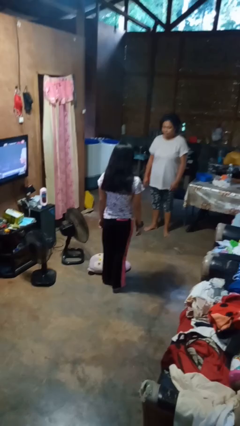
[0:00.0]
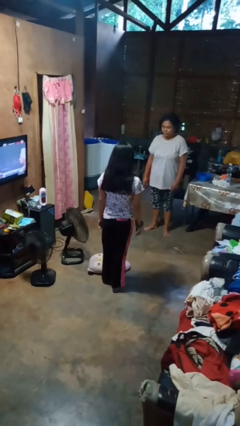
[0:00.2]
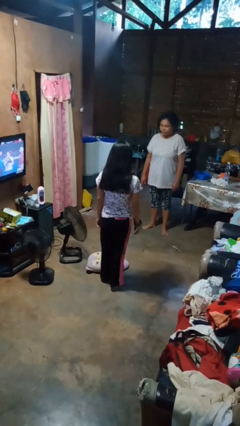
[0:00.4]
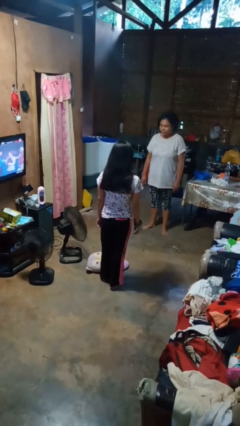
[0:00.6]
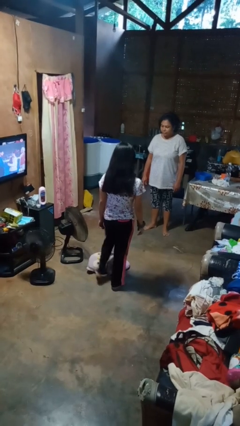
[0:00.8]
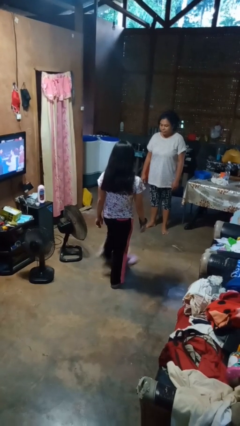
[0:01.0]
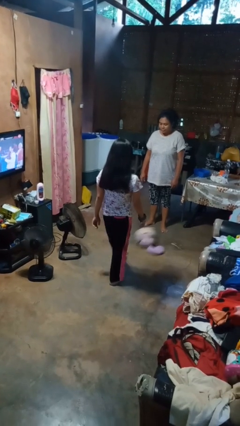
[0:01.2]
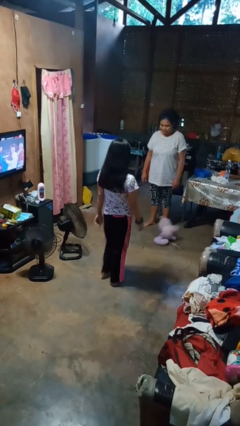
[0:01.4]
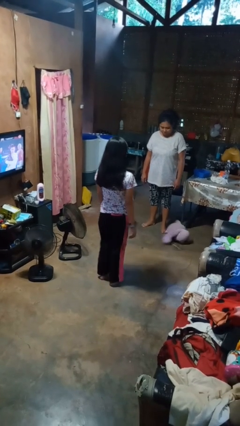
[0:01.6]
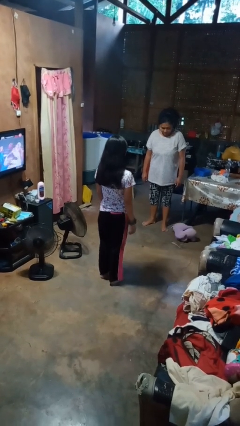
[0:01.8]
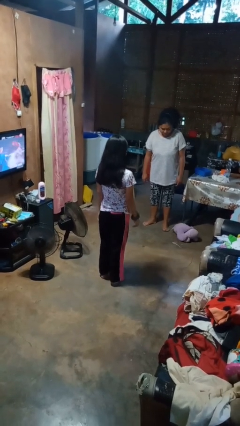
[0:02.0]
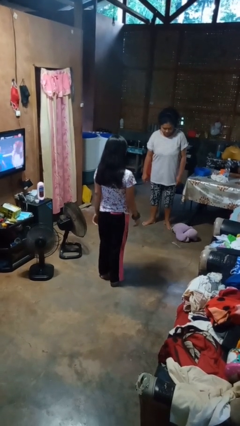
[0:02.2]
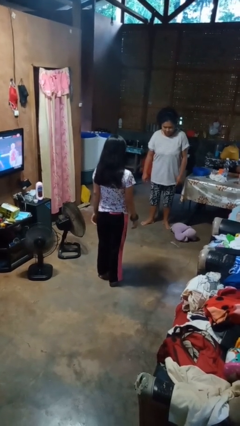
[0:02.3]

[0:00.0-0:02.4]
person kicks object to person

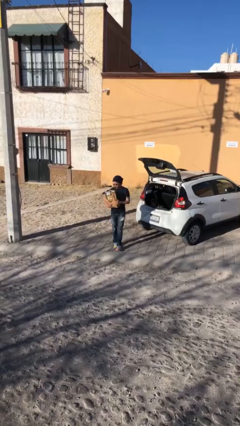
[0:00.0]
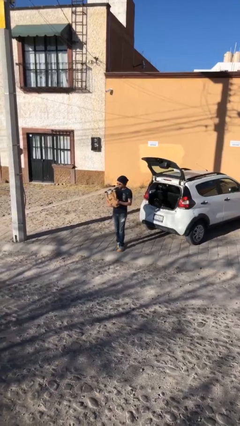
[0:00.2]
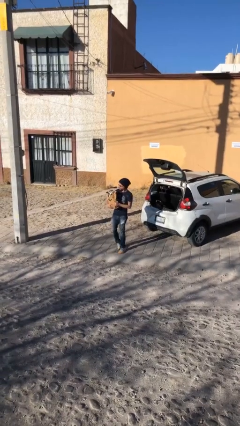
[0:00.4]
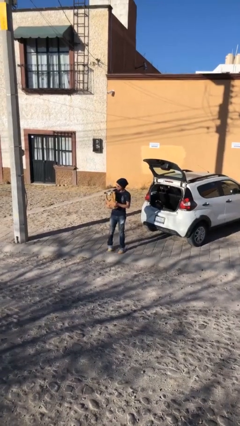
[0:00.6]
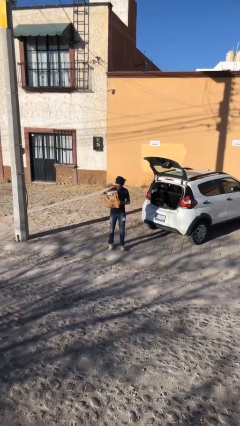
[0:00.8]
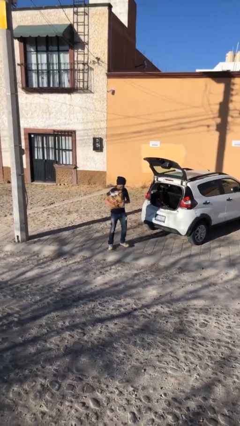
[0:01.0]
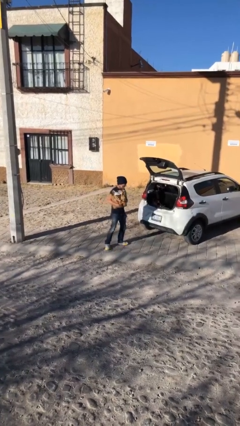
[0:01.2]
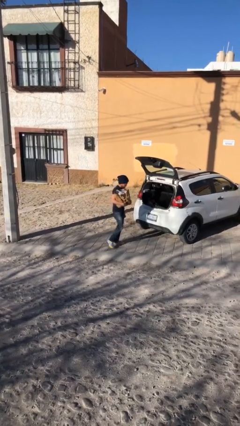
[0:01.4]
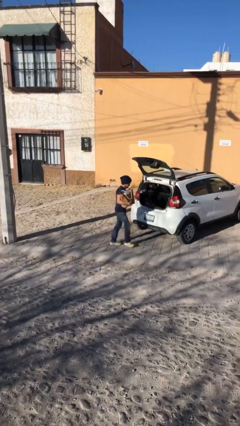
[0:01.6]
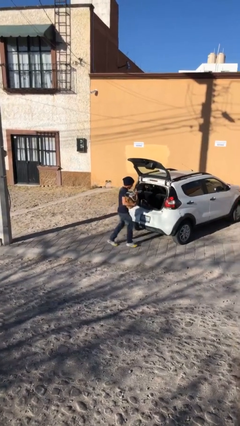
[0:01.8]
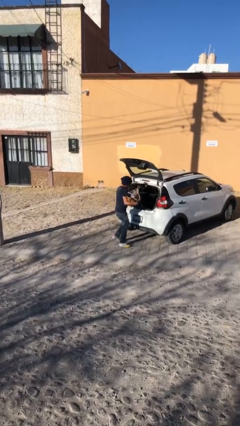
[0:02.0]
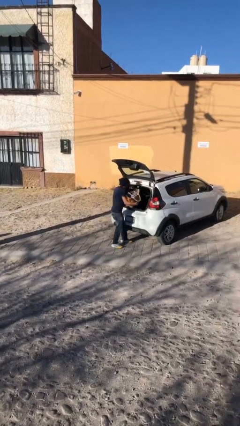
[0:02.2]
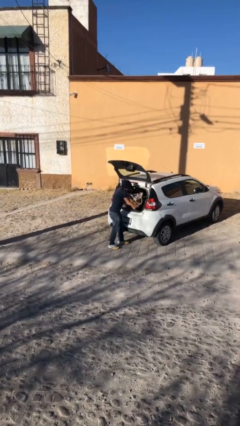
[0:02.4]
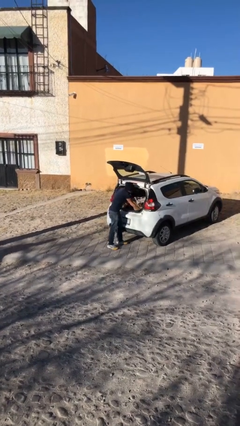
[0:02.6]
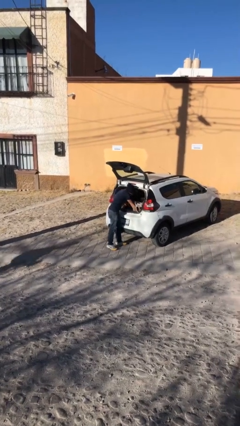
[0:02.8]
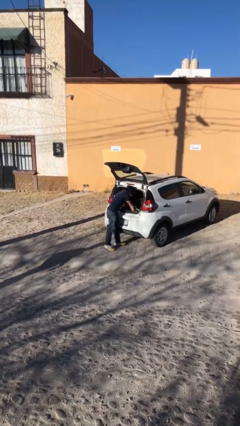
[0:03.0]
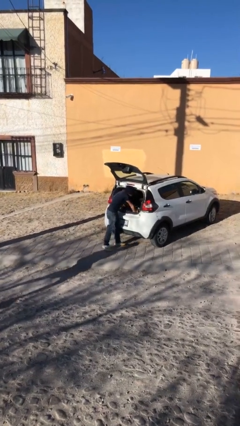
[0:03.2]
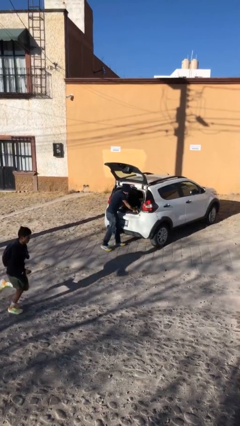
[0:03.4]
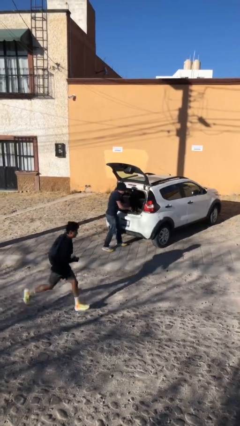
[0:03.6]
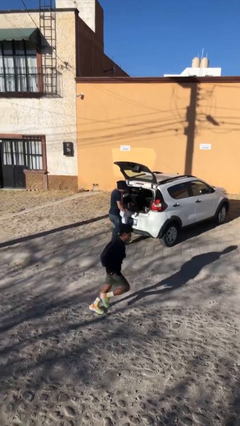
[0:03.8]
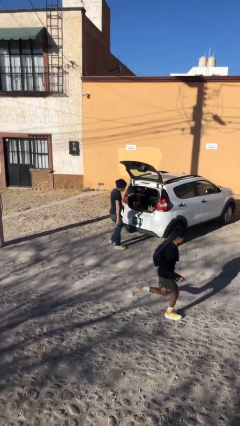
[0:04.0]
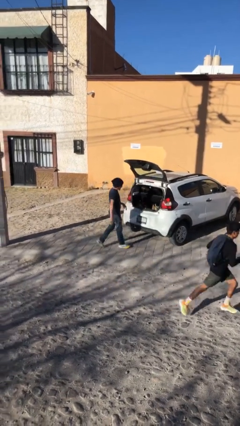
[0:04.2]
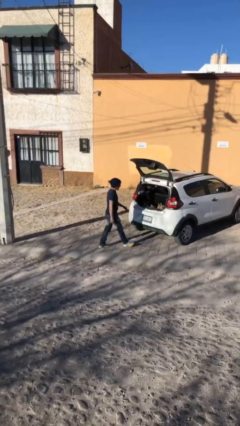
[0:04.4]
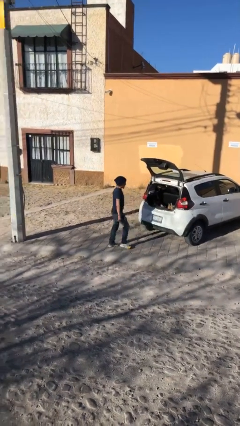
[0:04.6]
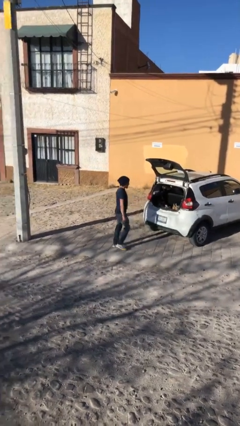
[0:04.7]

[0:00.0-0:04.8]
person loads car

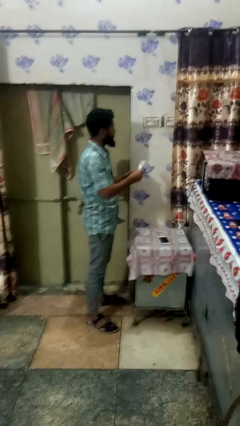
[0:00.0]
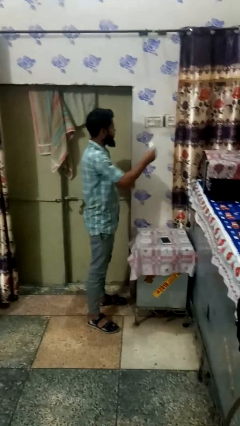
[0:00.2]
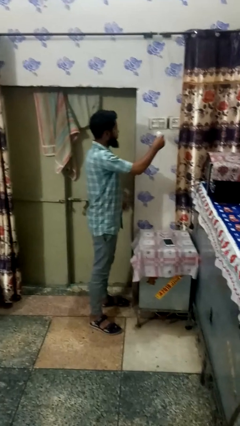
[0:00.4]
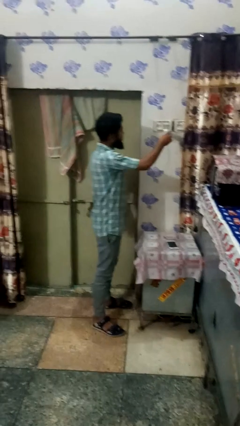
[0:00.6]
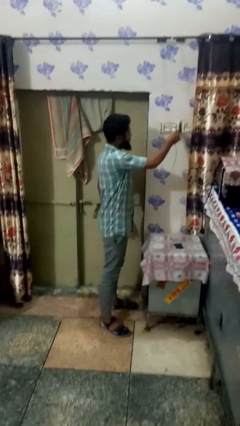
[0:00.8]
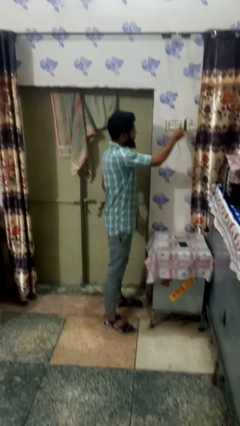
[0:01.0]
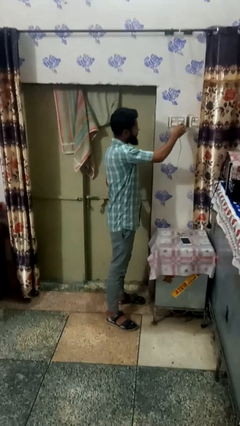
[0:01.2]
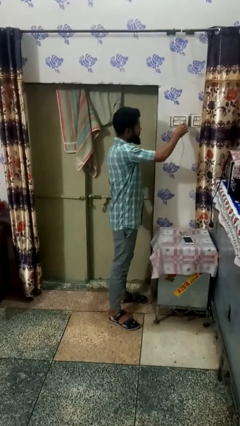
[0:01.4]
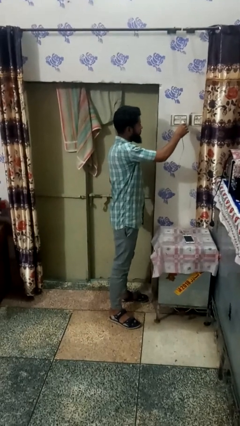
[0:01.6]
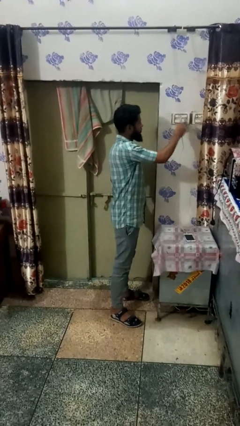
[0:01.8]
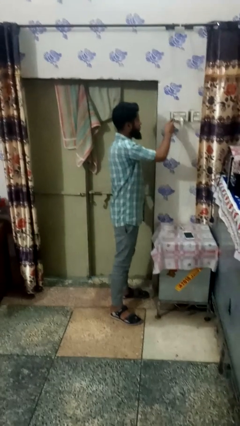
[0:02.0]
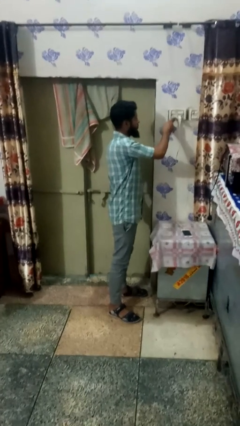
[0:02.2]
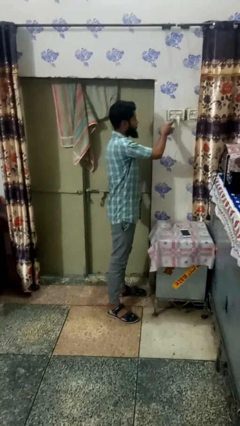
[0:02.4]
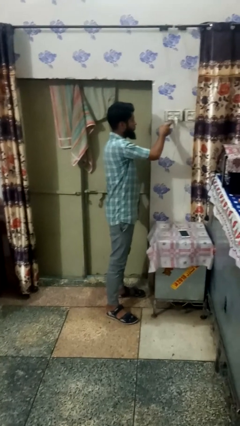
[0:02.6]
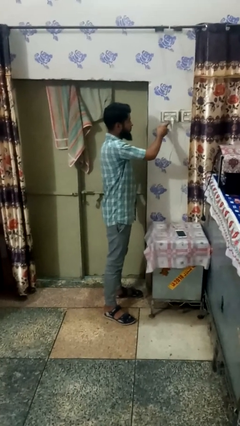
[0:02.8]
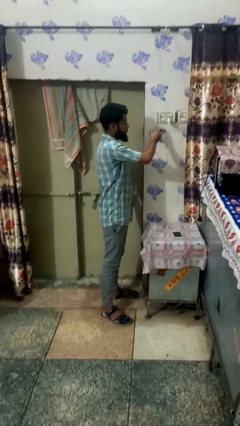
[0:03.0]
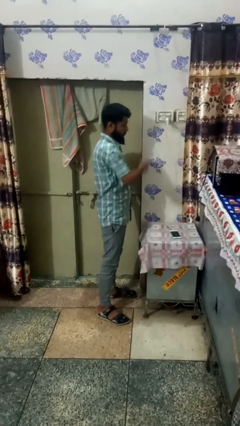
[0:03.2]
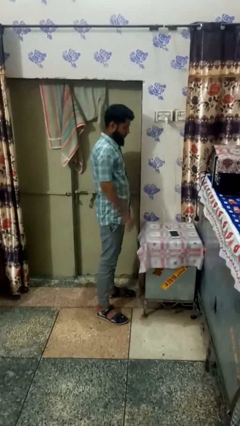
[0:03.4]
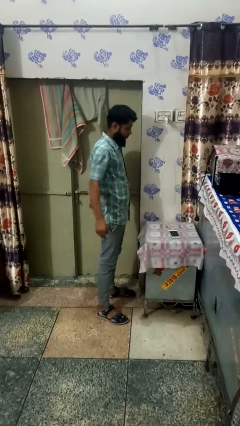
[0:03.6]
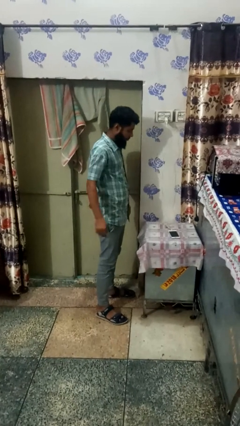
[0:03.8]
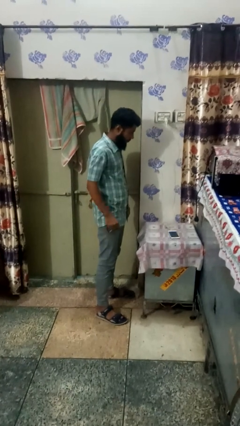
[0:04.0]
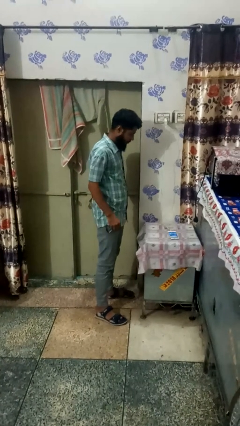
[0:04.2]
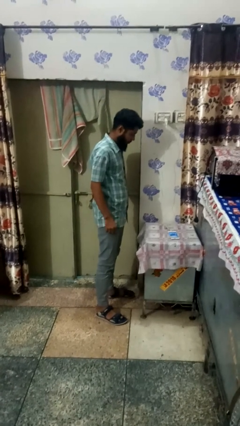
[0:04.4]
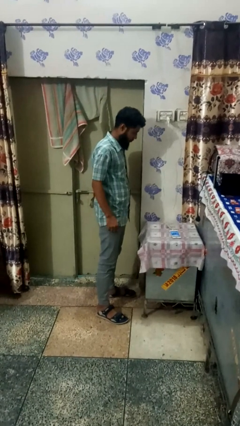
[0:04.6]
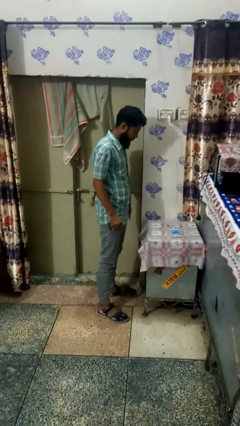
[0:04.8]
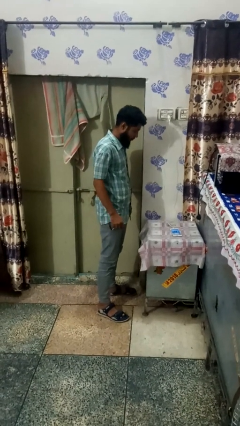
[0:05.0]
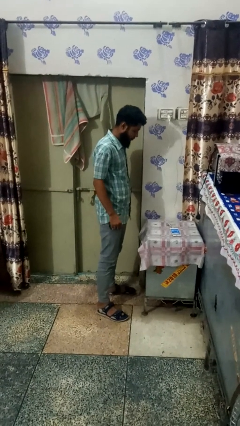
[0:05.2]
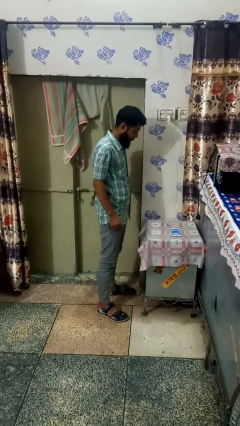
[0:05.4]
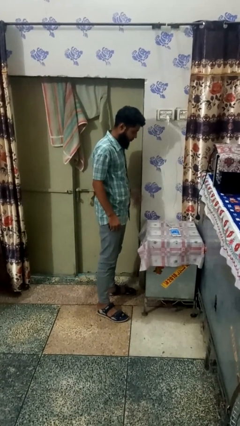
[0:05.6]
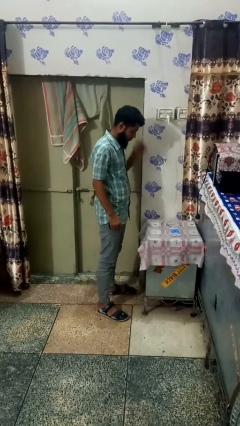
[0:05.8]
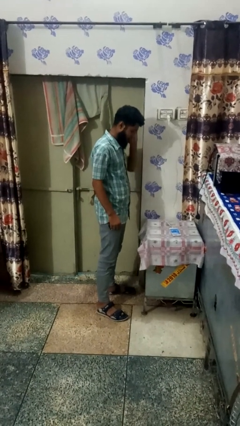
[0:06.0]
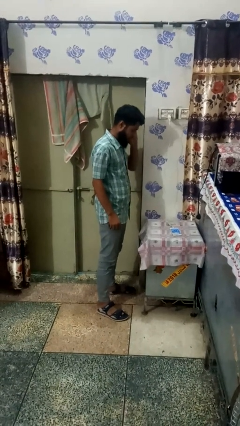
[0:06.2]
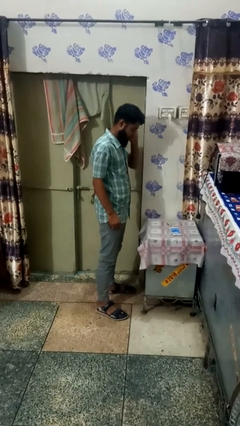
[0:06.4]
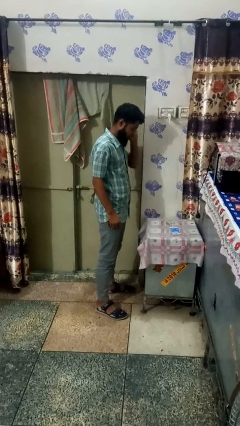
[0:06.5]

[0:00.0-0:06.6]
person plugs into electrical socket

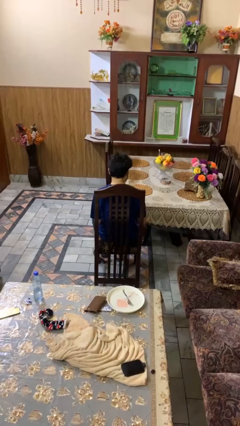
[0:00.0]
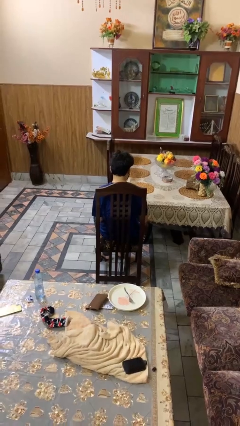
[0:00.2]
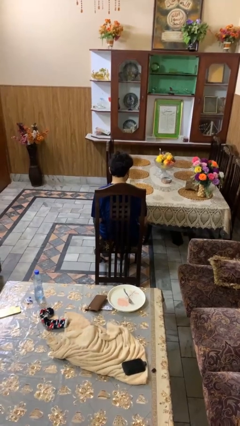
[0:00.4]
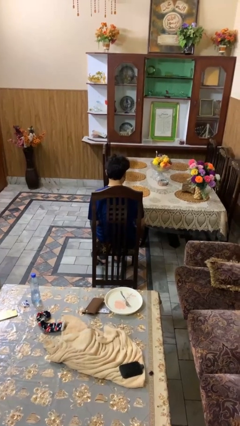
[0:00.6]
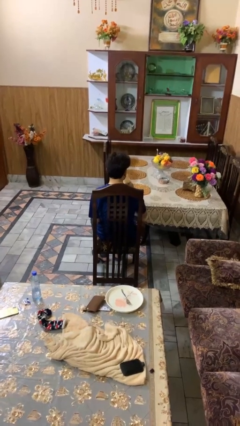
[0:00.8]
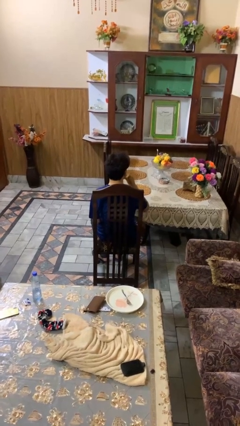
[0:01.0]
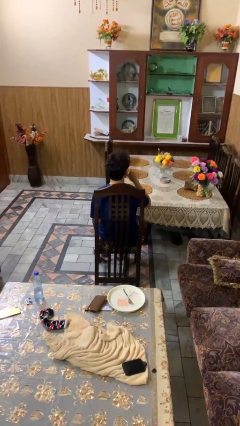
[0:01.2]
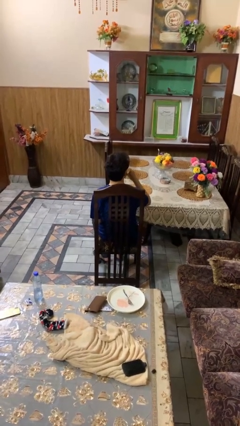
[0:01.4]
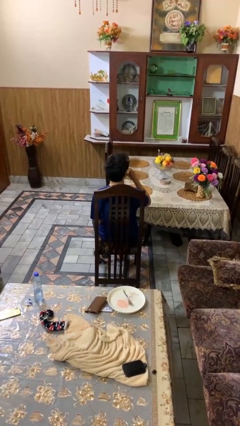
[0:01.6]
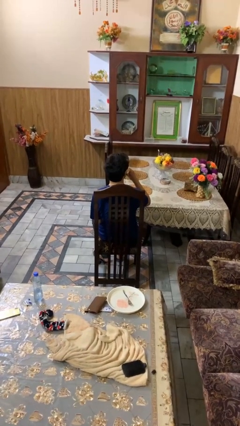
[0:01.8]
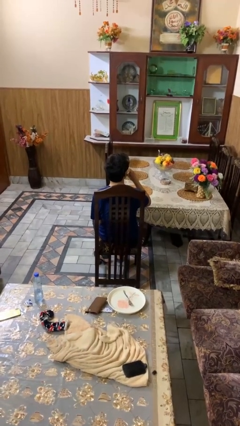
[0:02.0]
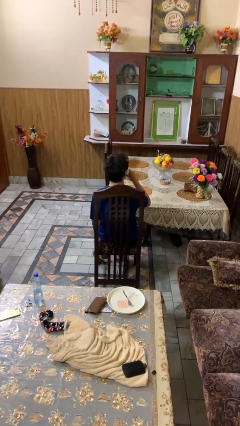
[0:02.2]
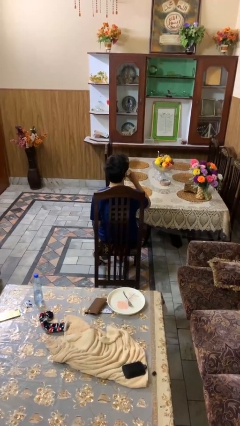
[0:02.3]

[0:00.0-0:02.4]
person drinks from shotglass

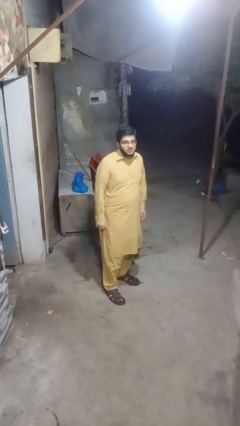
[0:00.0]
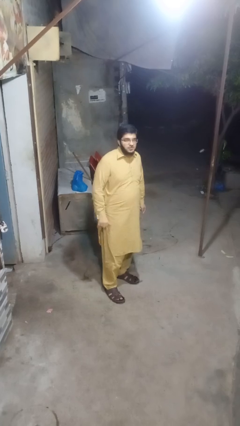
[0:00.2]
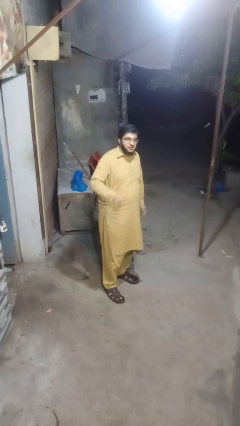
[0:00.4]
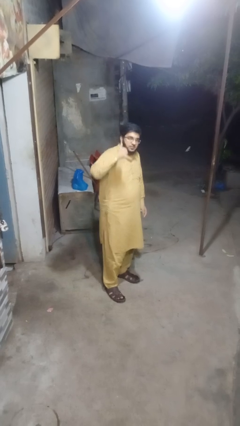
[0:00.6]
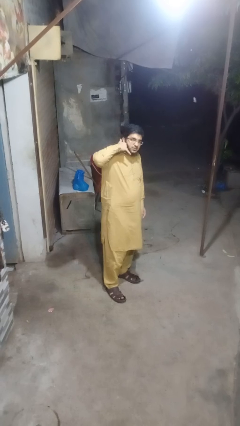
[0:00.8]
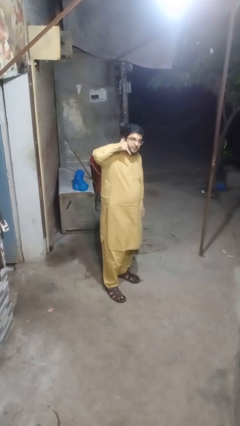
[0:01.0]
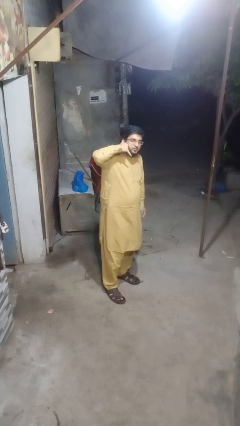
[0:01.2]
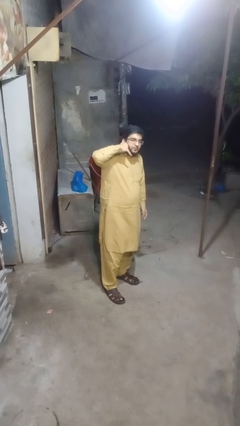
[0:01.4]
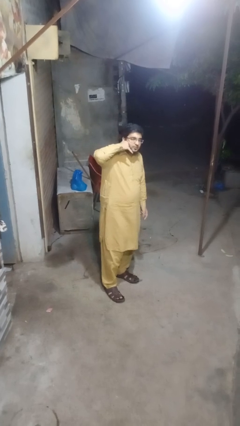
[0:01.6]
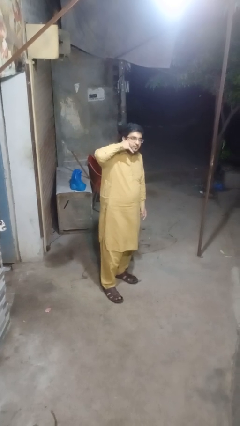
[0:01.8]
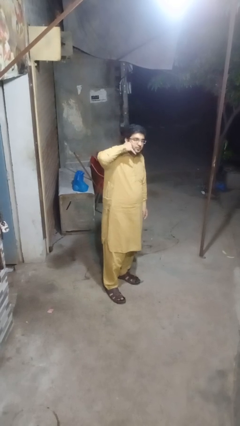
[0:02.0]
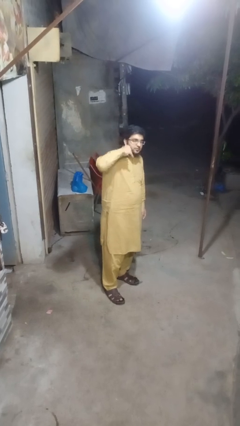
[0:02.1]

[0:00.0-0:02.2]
person gestures call me
